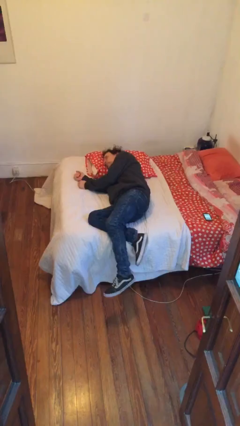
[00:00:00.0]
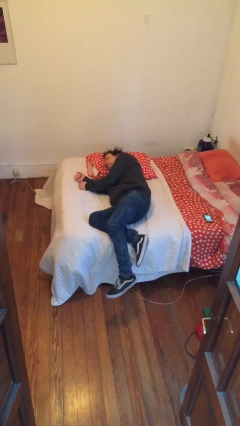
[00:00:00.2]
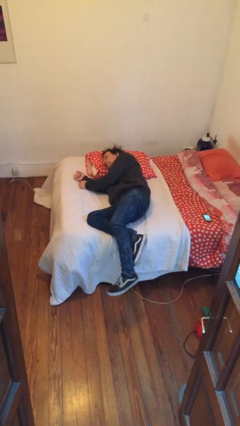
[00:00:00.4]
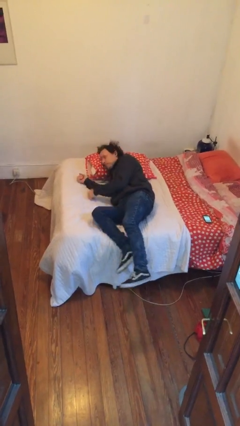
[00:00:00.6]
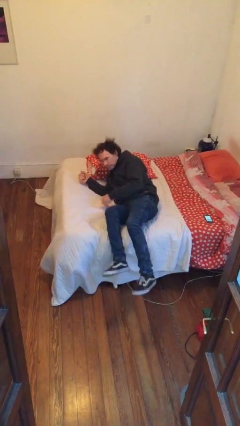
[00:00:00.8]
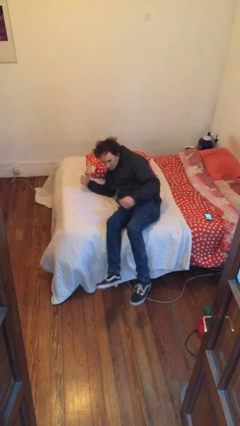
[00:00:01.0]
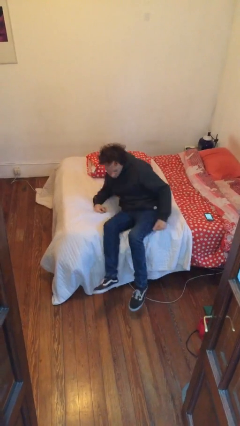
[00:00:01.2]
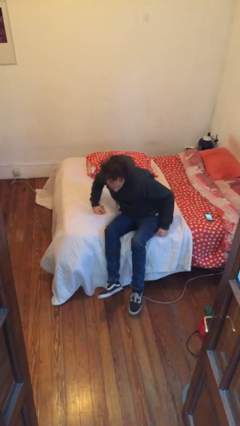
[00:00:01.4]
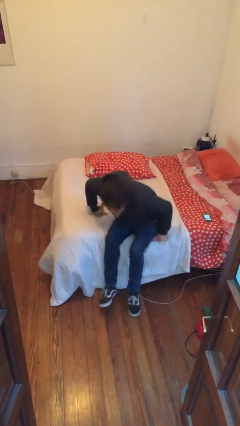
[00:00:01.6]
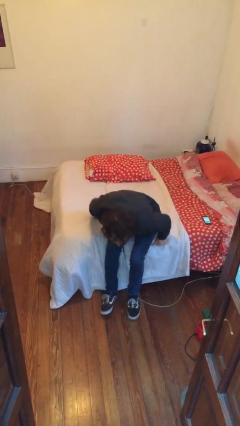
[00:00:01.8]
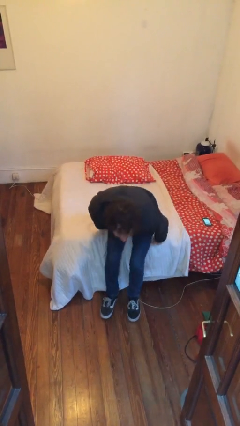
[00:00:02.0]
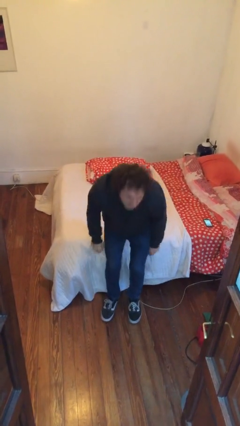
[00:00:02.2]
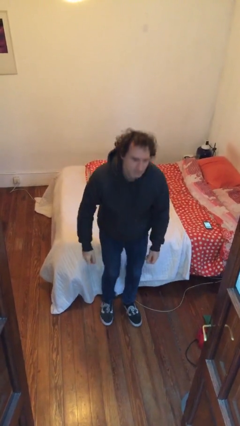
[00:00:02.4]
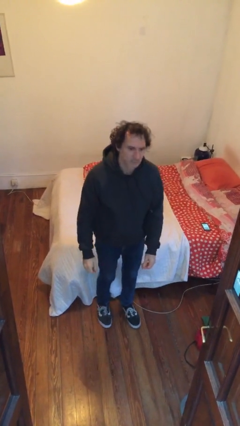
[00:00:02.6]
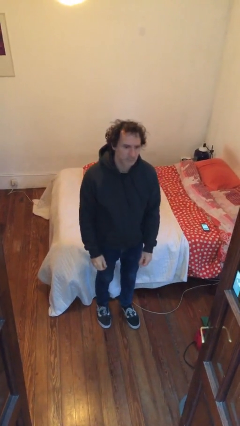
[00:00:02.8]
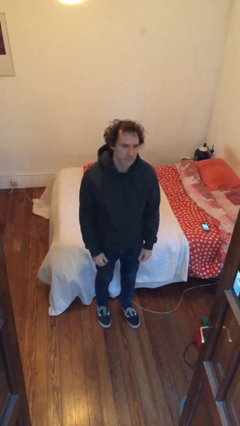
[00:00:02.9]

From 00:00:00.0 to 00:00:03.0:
person stands up

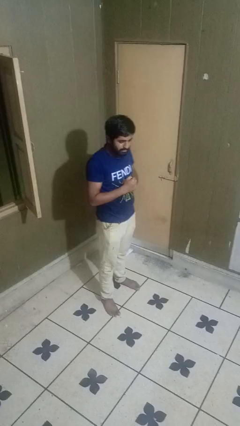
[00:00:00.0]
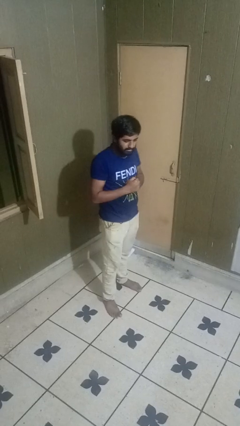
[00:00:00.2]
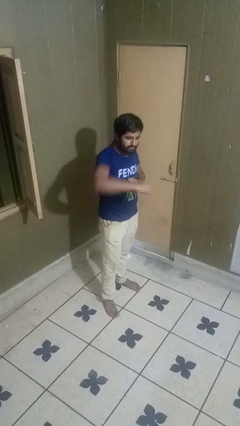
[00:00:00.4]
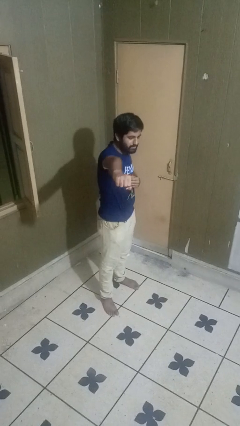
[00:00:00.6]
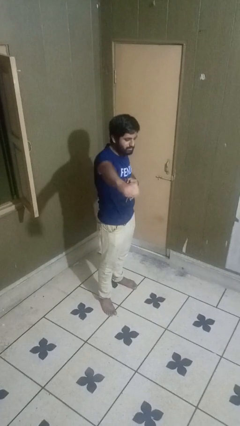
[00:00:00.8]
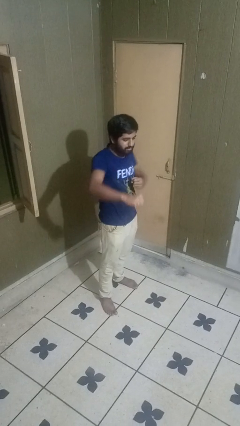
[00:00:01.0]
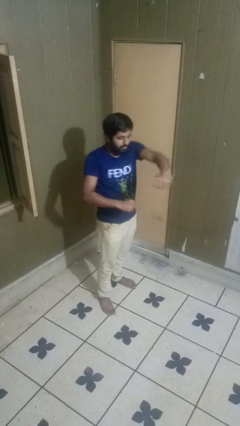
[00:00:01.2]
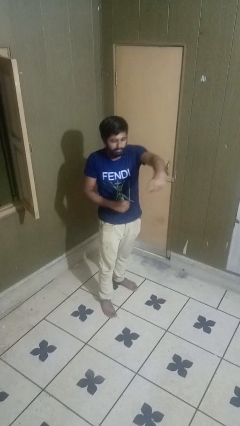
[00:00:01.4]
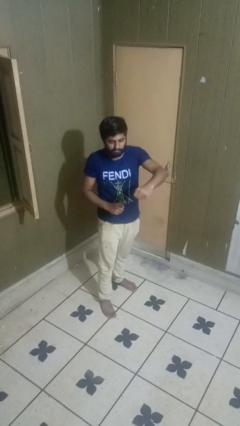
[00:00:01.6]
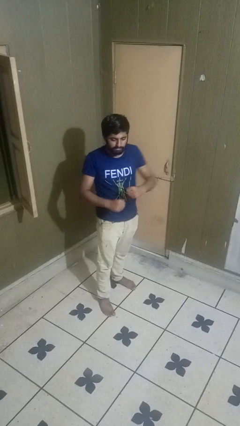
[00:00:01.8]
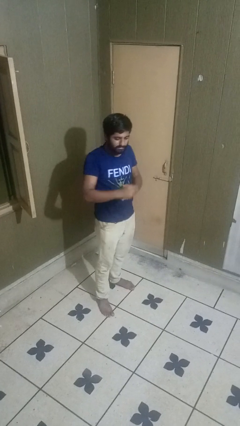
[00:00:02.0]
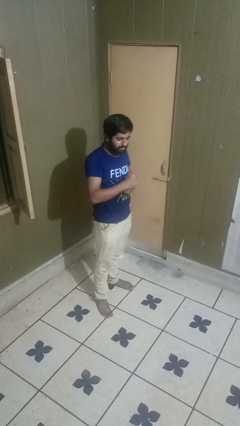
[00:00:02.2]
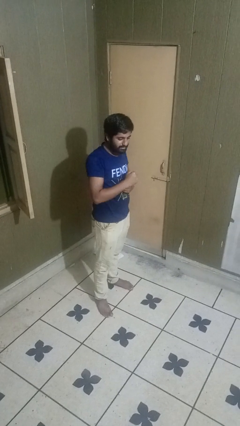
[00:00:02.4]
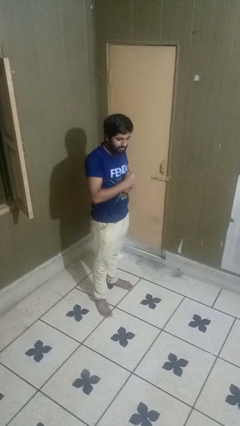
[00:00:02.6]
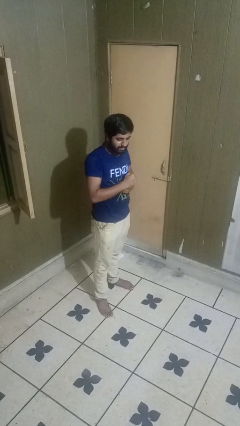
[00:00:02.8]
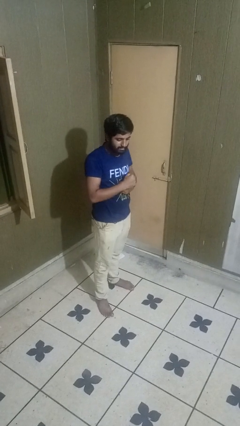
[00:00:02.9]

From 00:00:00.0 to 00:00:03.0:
person punches

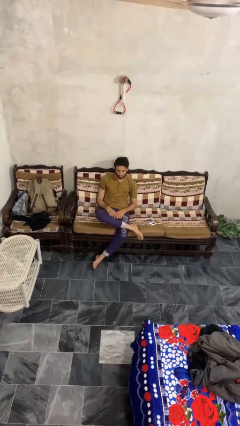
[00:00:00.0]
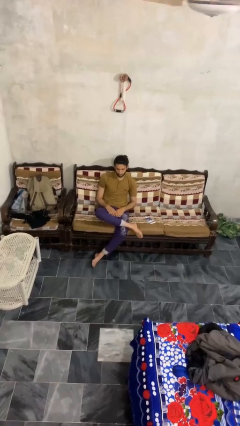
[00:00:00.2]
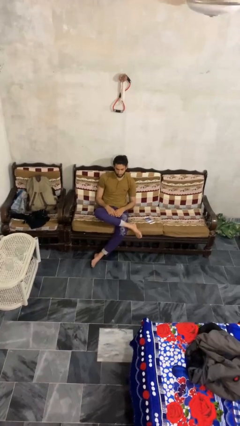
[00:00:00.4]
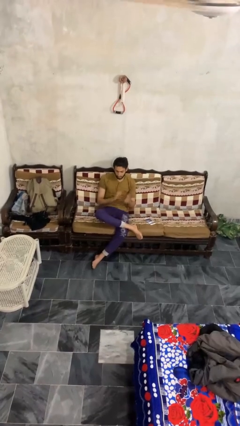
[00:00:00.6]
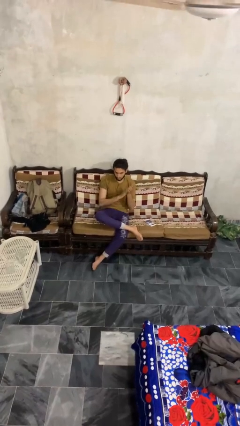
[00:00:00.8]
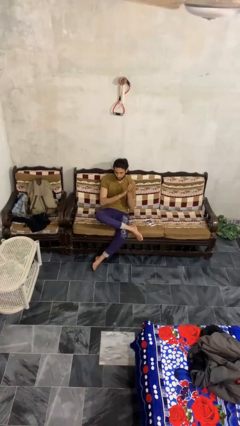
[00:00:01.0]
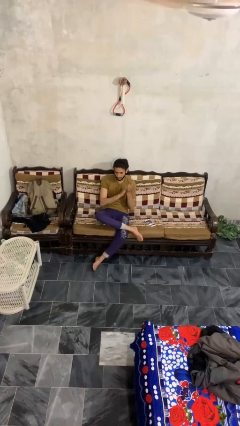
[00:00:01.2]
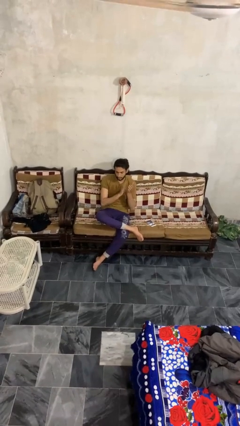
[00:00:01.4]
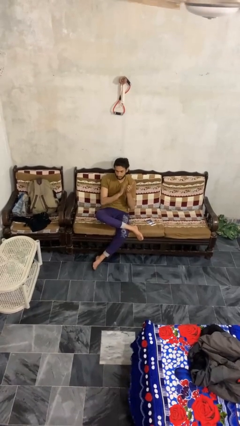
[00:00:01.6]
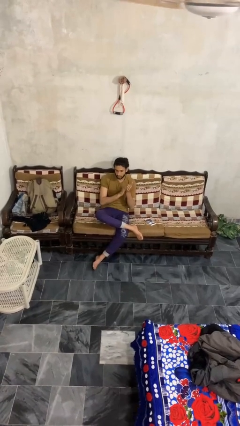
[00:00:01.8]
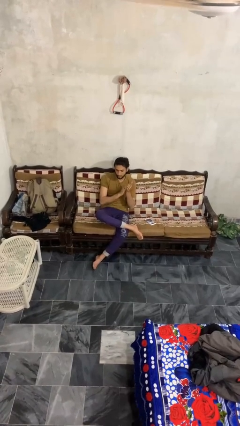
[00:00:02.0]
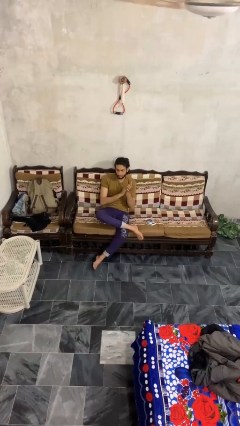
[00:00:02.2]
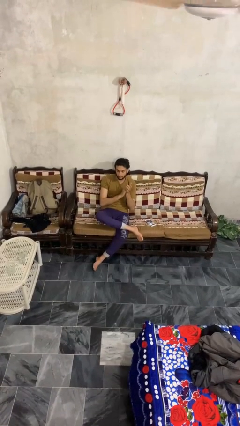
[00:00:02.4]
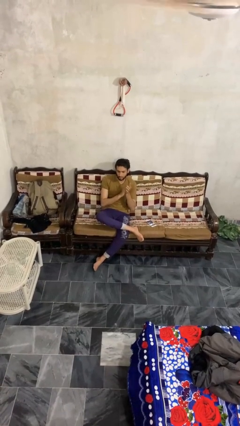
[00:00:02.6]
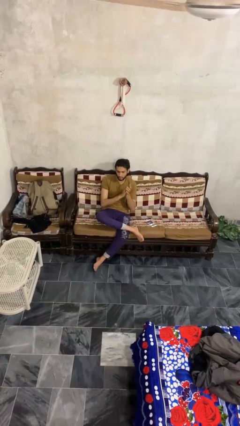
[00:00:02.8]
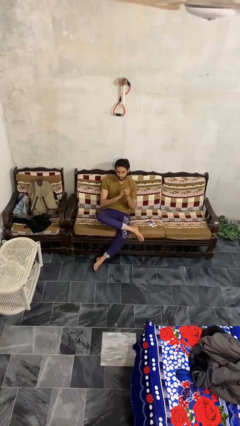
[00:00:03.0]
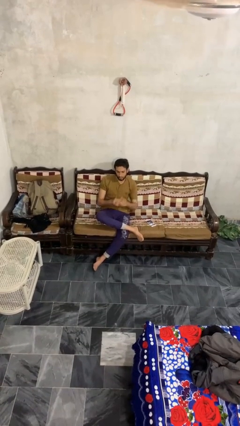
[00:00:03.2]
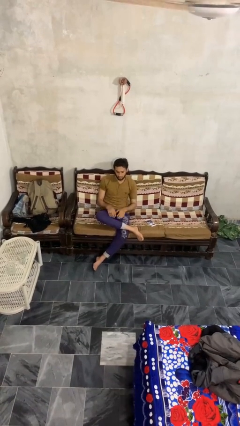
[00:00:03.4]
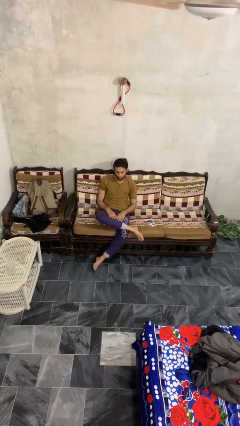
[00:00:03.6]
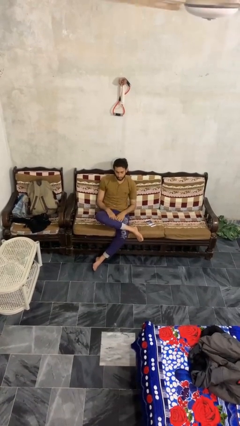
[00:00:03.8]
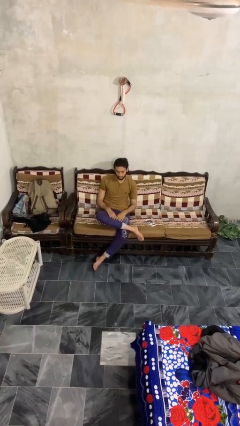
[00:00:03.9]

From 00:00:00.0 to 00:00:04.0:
person claps hands

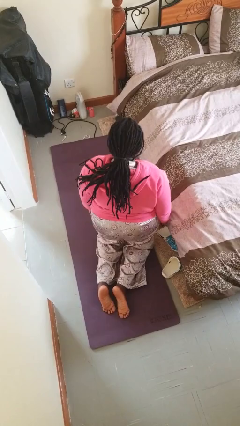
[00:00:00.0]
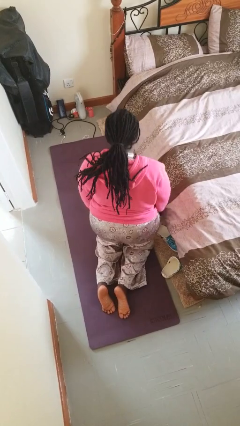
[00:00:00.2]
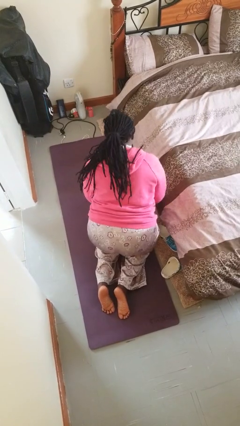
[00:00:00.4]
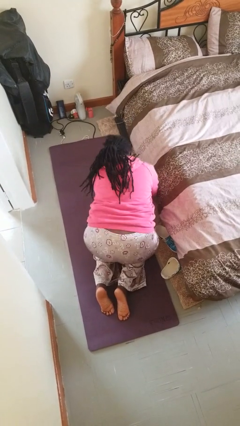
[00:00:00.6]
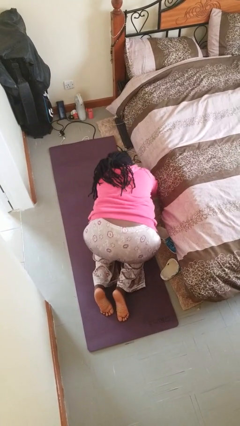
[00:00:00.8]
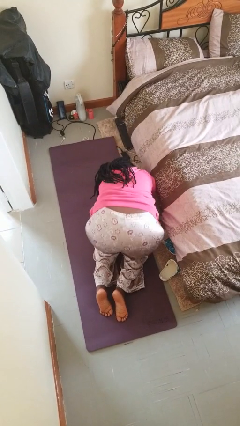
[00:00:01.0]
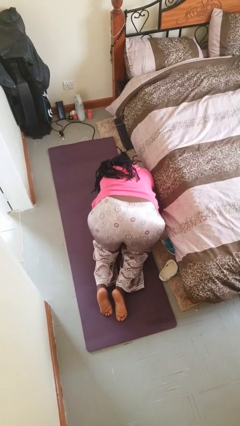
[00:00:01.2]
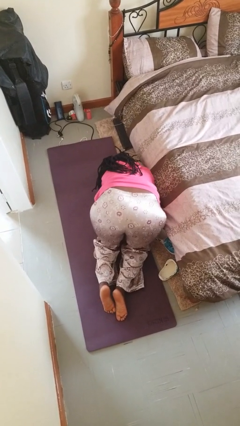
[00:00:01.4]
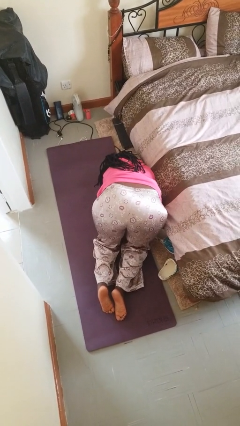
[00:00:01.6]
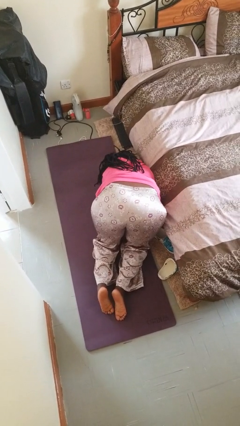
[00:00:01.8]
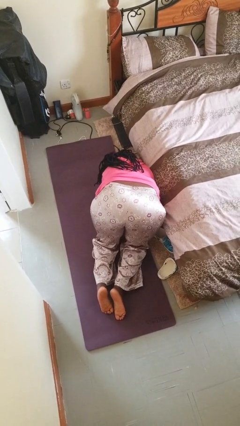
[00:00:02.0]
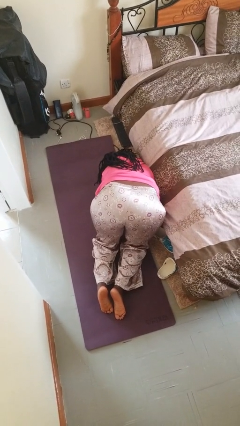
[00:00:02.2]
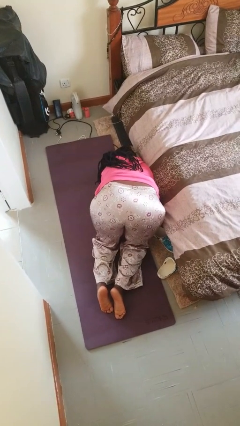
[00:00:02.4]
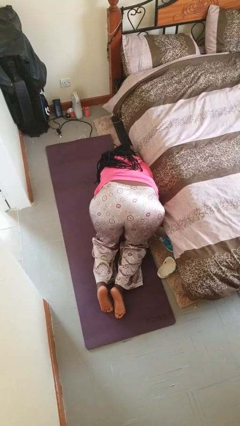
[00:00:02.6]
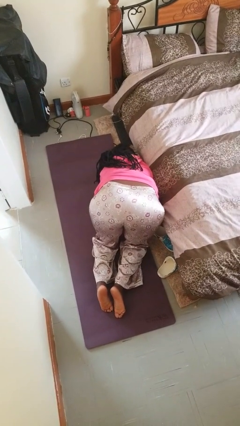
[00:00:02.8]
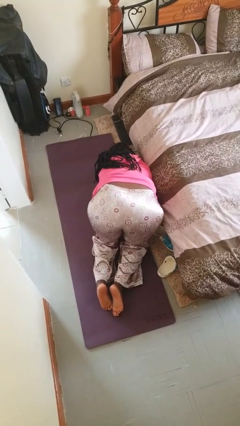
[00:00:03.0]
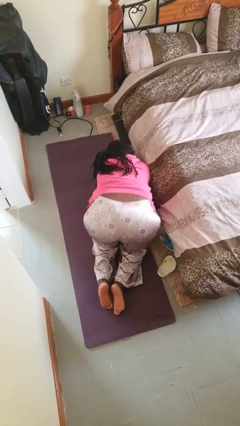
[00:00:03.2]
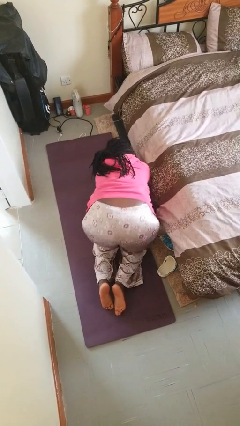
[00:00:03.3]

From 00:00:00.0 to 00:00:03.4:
person searches under bed

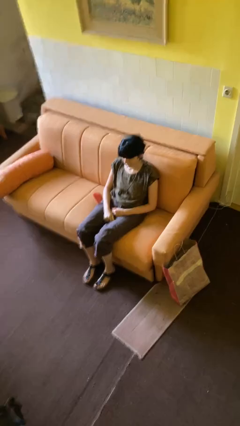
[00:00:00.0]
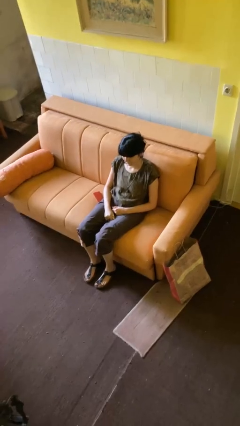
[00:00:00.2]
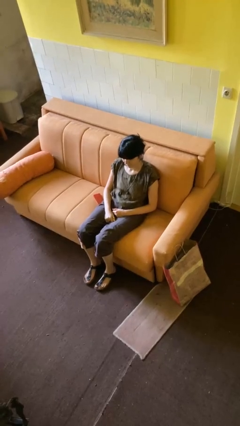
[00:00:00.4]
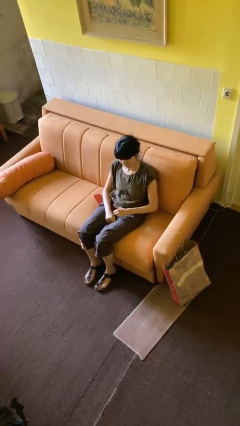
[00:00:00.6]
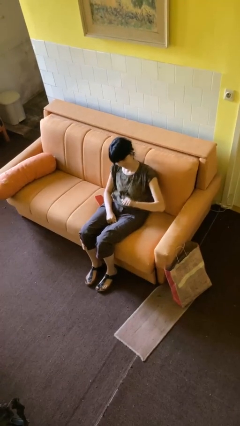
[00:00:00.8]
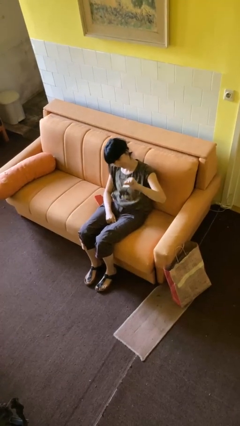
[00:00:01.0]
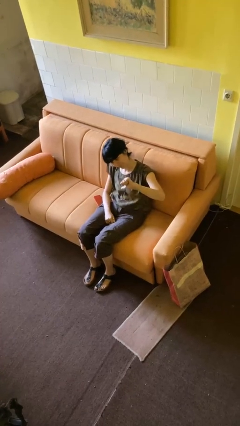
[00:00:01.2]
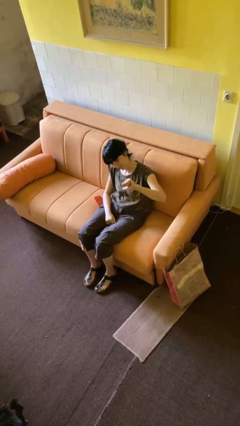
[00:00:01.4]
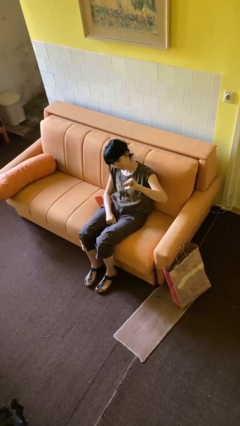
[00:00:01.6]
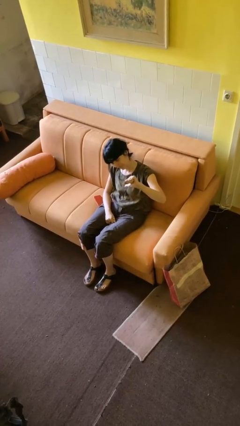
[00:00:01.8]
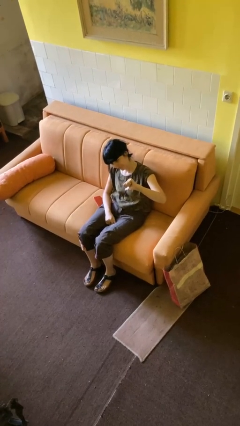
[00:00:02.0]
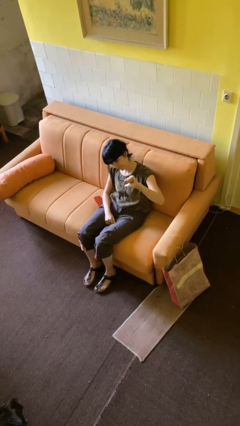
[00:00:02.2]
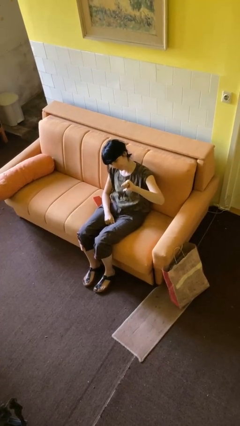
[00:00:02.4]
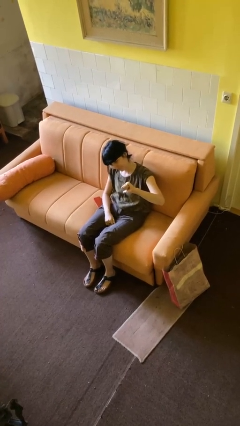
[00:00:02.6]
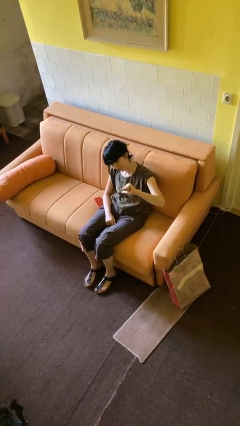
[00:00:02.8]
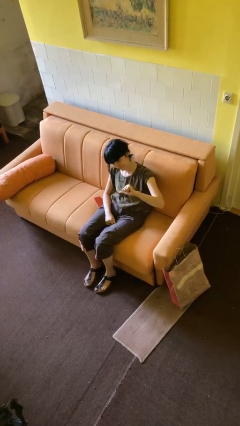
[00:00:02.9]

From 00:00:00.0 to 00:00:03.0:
person gestures thumbs down

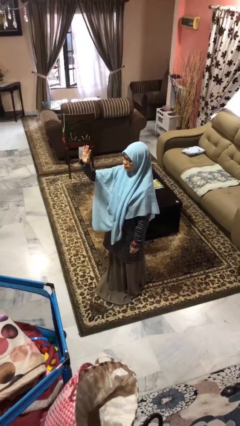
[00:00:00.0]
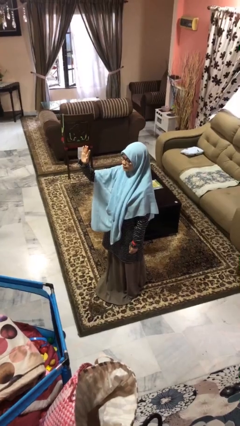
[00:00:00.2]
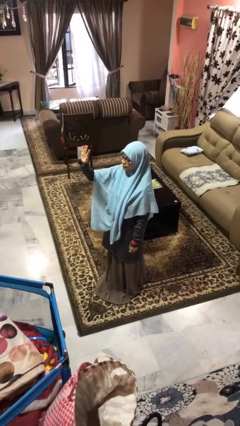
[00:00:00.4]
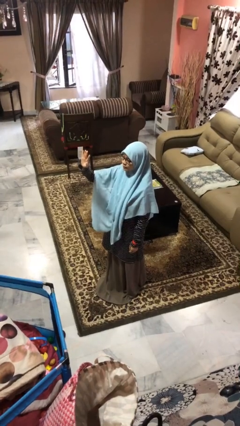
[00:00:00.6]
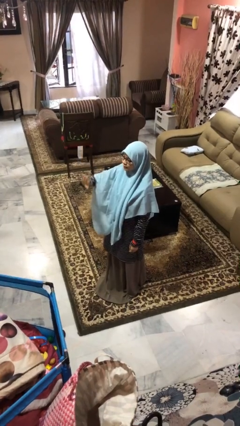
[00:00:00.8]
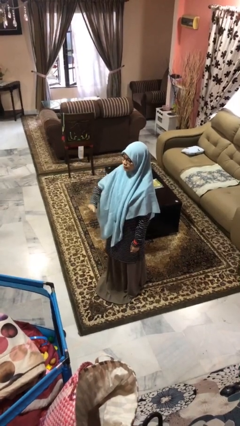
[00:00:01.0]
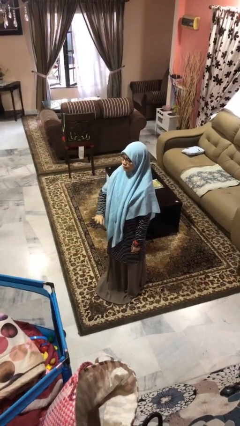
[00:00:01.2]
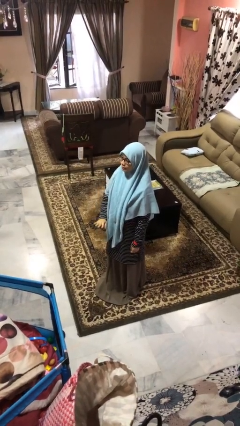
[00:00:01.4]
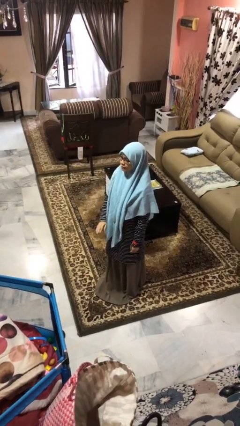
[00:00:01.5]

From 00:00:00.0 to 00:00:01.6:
person gestures swipe down
